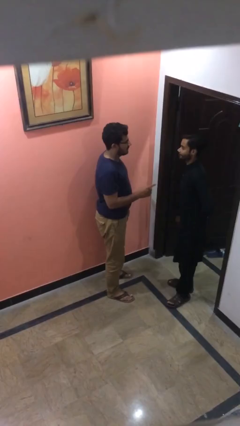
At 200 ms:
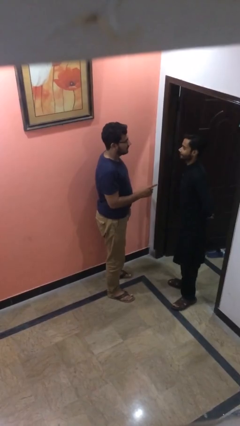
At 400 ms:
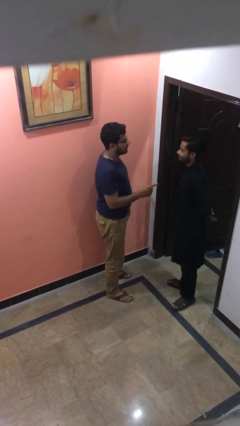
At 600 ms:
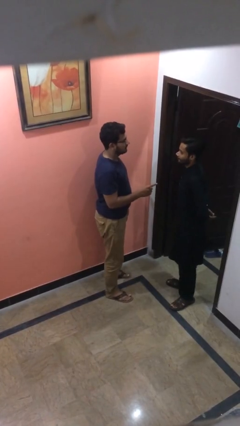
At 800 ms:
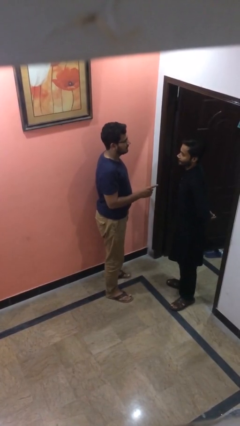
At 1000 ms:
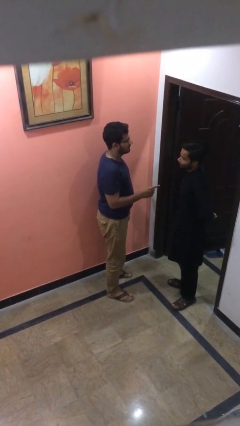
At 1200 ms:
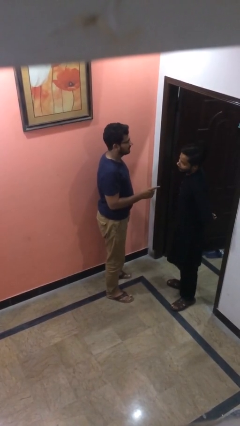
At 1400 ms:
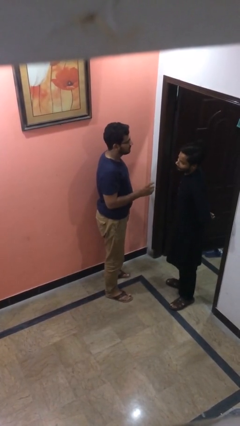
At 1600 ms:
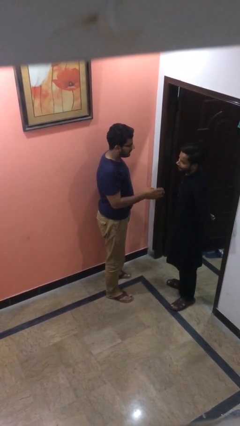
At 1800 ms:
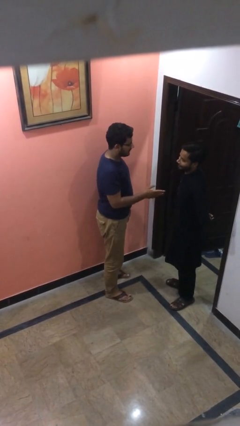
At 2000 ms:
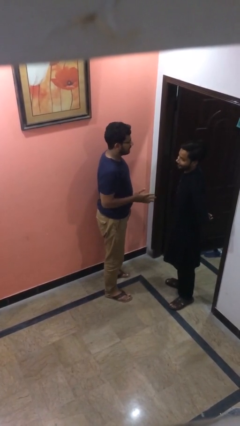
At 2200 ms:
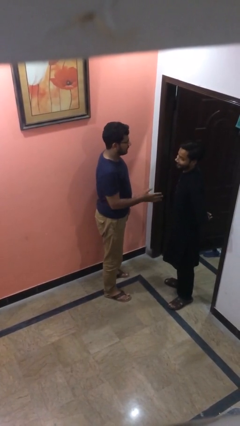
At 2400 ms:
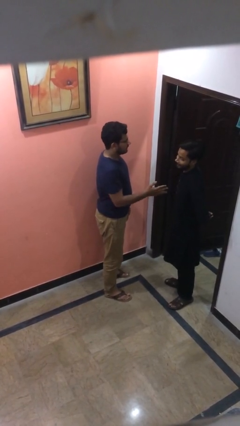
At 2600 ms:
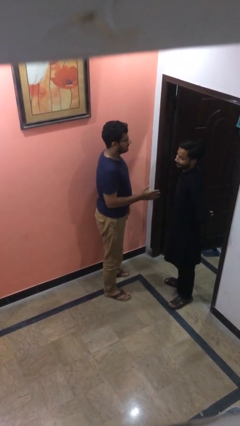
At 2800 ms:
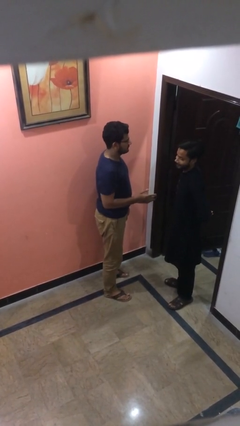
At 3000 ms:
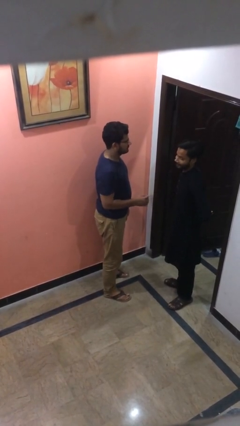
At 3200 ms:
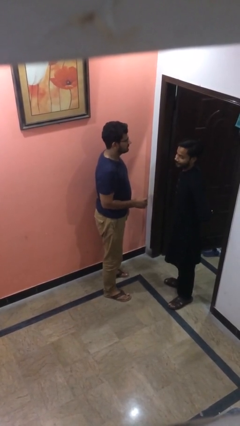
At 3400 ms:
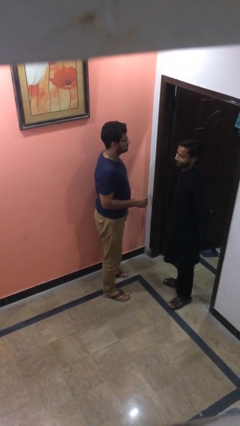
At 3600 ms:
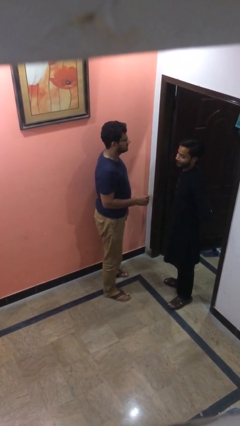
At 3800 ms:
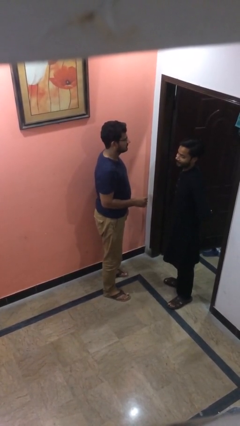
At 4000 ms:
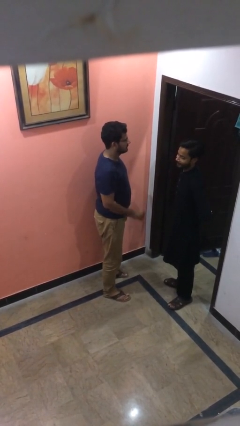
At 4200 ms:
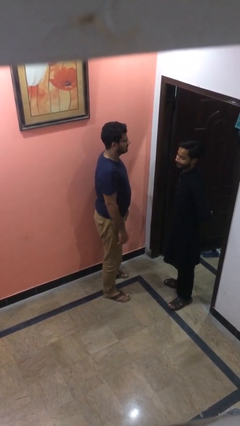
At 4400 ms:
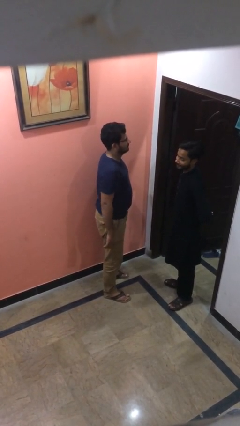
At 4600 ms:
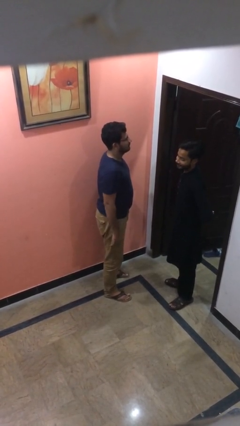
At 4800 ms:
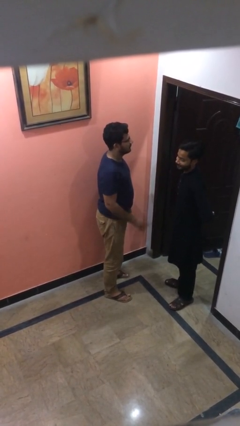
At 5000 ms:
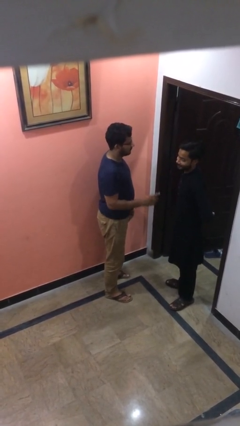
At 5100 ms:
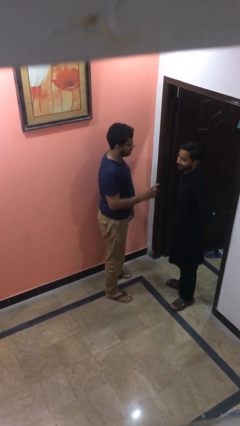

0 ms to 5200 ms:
person talks to person

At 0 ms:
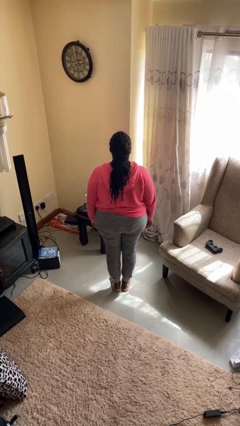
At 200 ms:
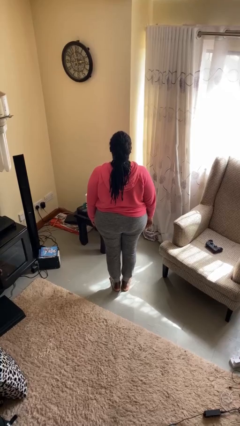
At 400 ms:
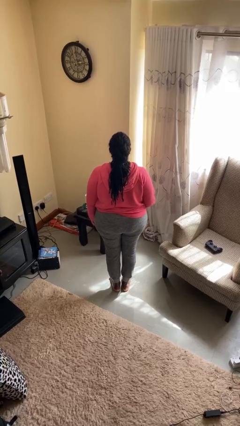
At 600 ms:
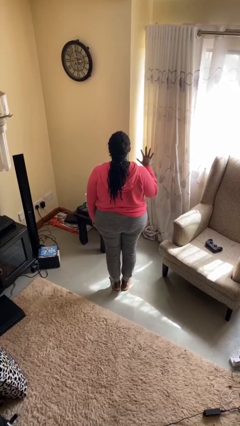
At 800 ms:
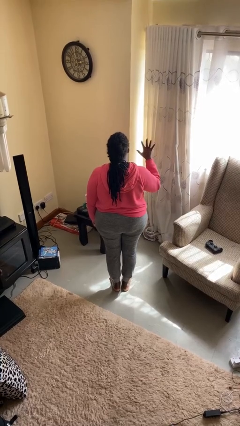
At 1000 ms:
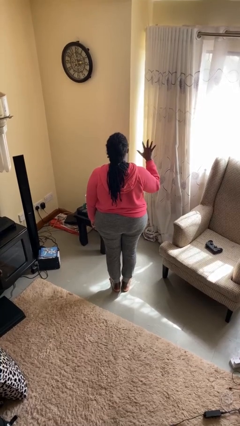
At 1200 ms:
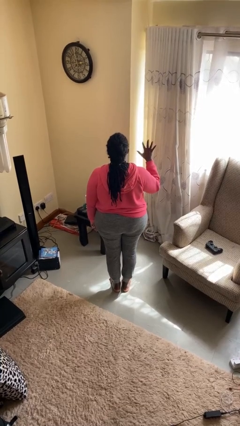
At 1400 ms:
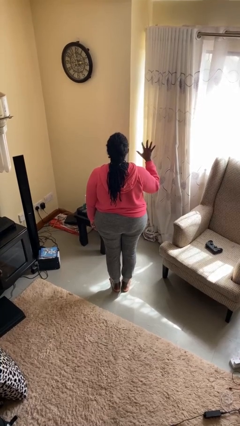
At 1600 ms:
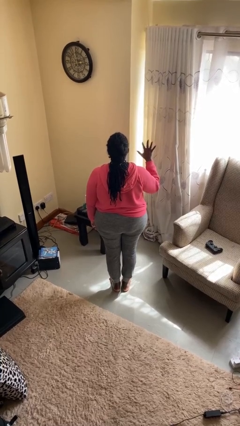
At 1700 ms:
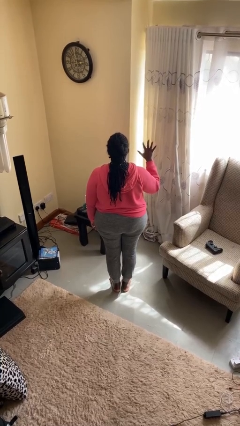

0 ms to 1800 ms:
person gestures number five

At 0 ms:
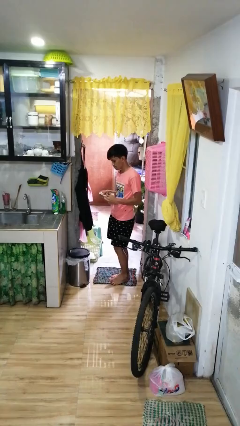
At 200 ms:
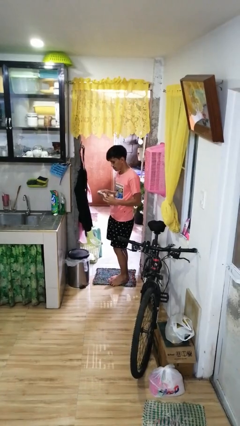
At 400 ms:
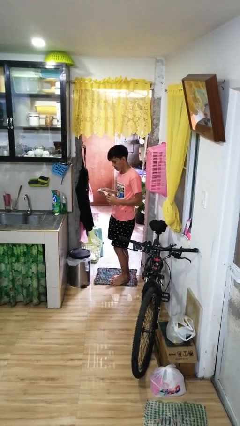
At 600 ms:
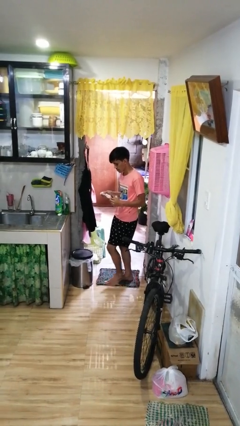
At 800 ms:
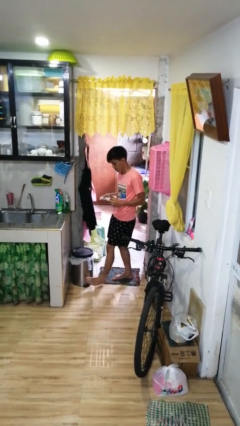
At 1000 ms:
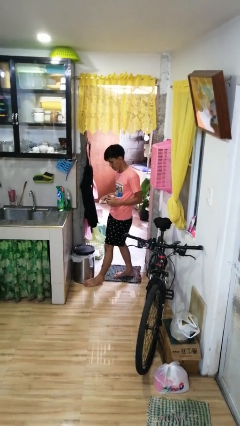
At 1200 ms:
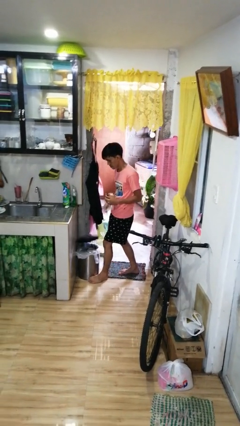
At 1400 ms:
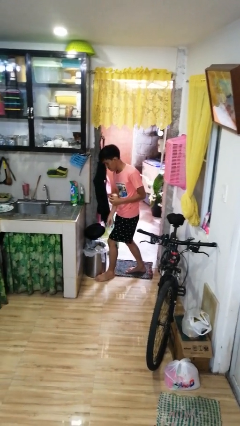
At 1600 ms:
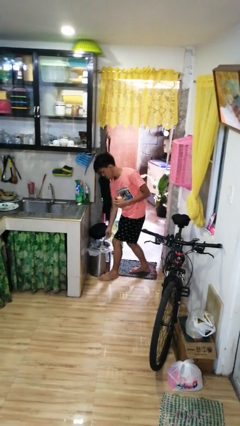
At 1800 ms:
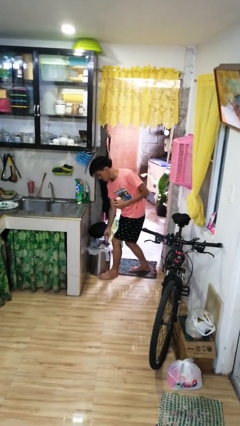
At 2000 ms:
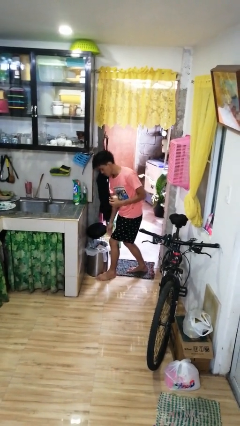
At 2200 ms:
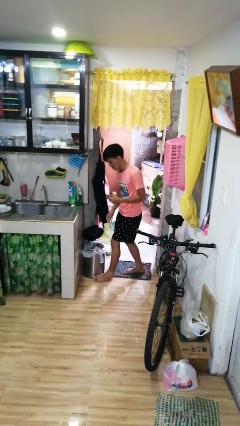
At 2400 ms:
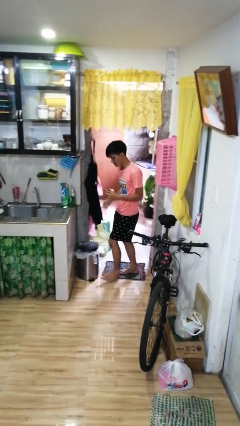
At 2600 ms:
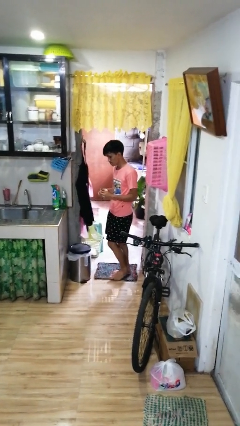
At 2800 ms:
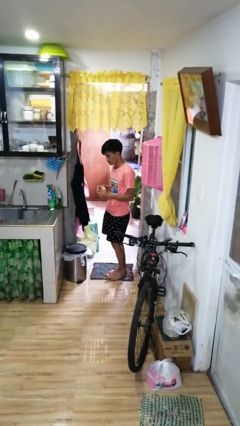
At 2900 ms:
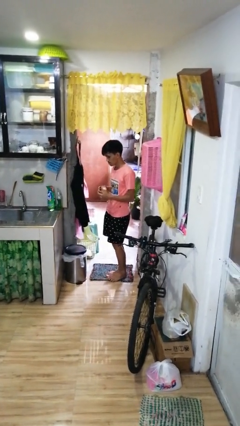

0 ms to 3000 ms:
person discards trash

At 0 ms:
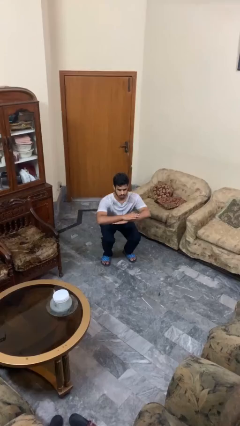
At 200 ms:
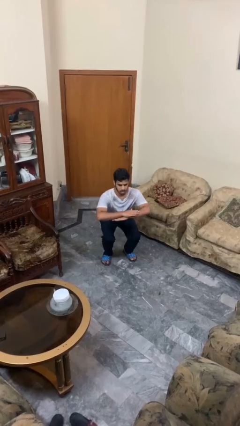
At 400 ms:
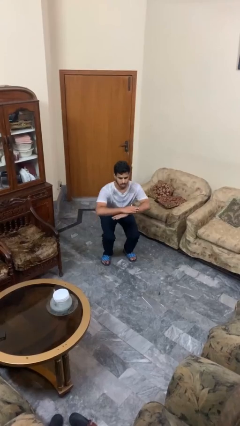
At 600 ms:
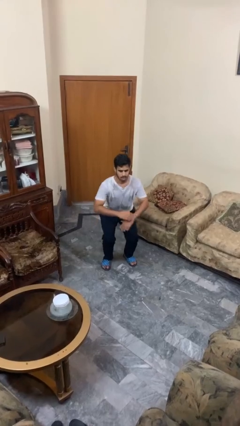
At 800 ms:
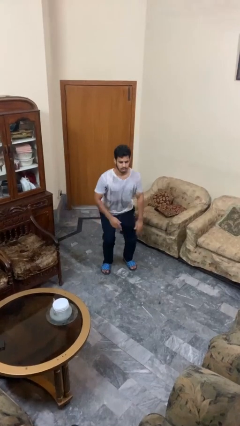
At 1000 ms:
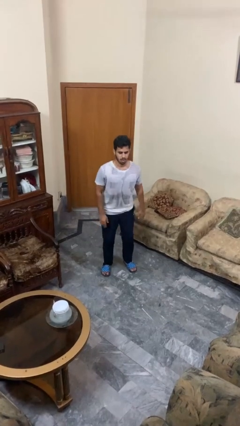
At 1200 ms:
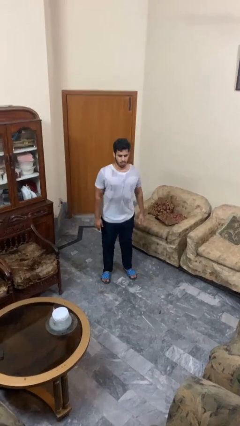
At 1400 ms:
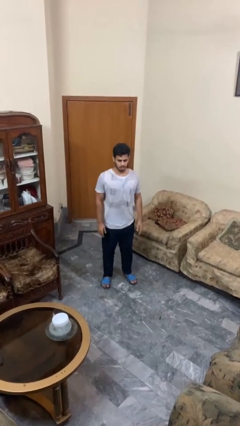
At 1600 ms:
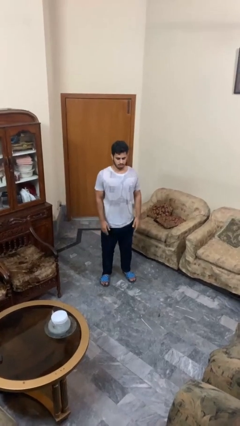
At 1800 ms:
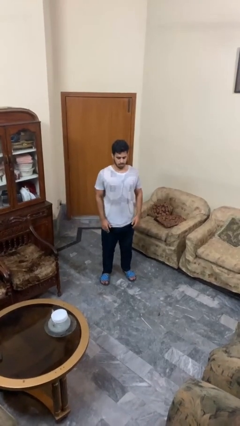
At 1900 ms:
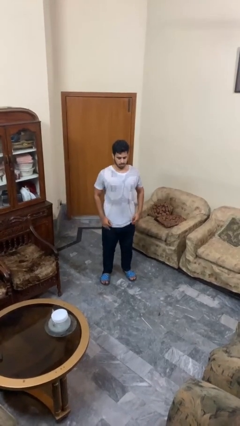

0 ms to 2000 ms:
person stands up

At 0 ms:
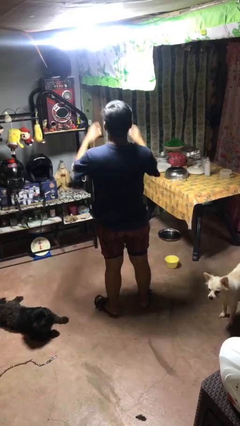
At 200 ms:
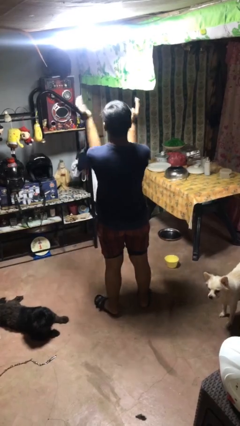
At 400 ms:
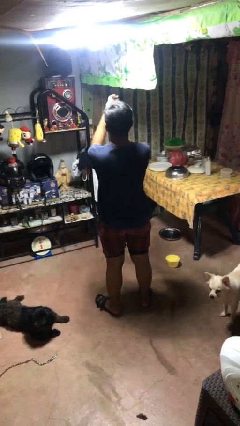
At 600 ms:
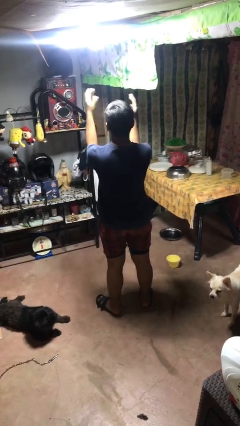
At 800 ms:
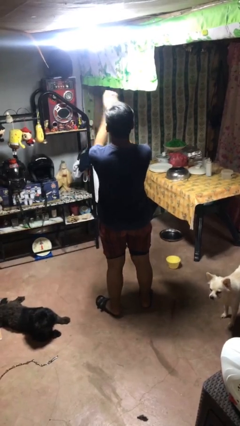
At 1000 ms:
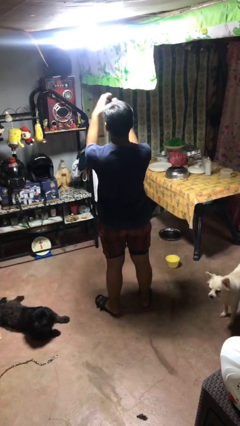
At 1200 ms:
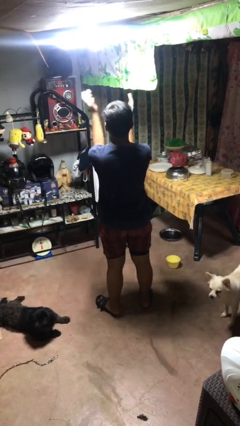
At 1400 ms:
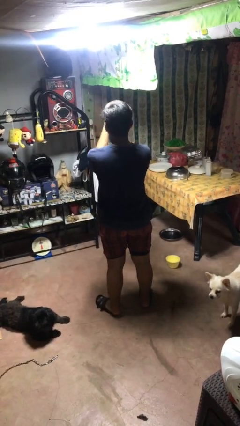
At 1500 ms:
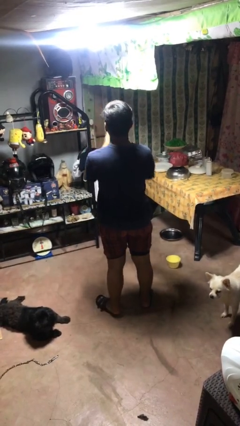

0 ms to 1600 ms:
person claps hands

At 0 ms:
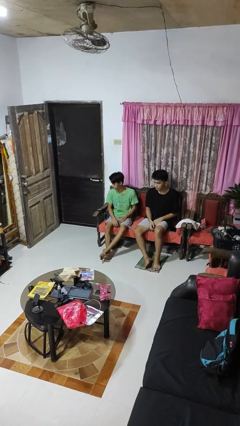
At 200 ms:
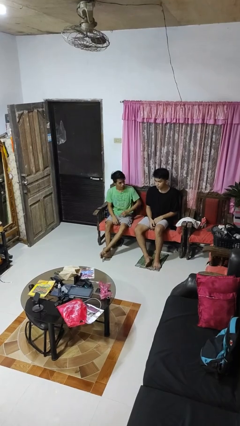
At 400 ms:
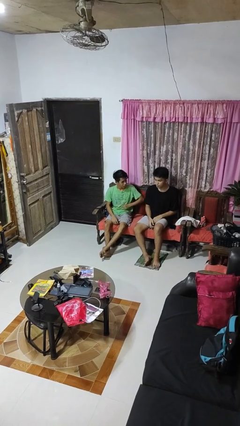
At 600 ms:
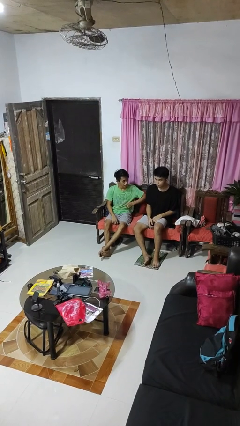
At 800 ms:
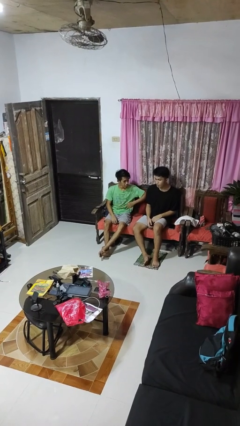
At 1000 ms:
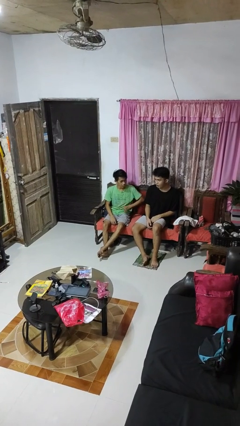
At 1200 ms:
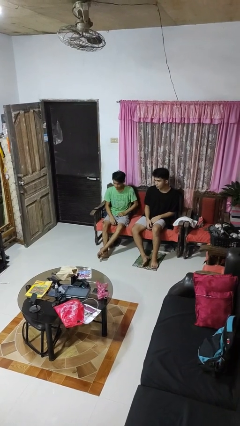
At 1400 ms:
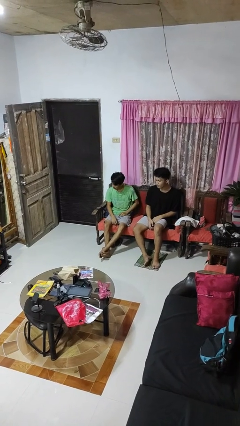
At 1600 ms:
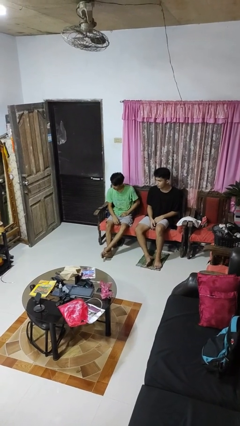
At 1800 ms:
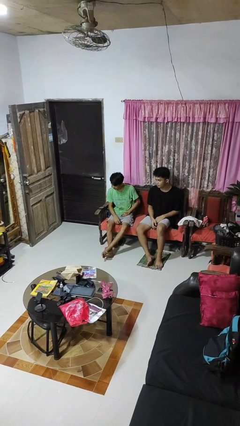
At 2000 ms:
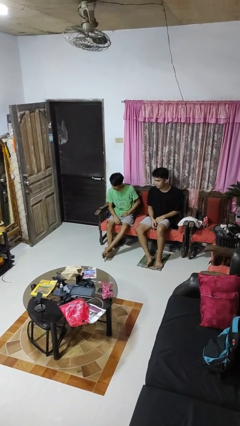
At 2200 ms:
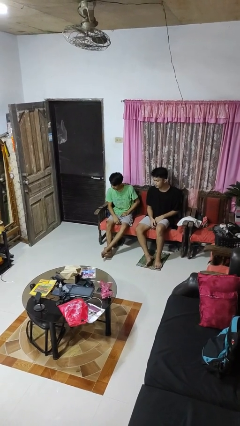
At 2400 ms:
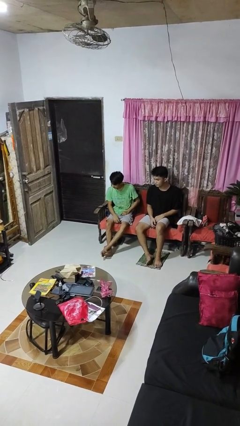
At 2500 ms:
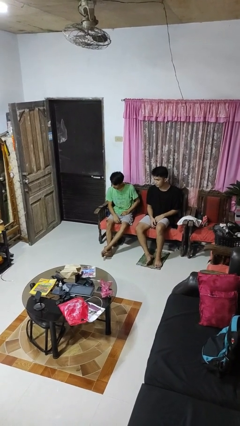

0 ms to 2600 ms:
person nudges person with elbow

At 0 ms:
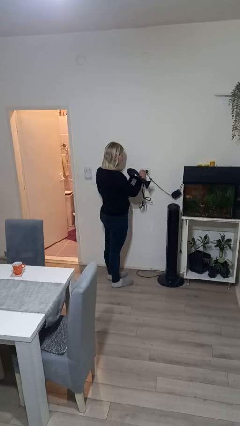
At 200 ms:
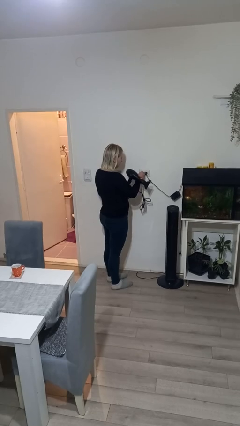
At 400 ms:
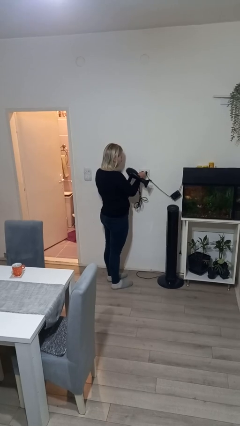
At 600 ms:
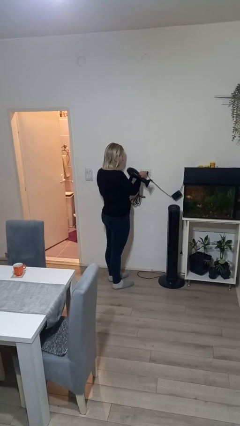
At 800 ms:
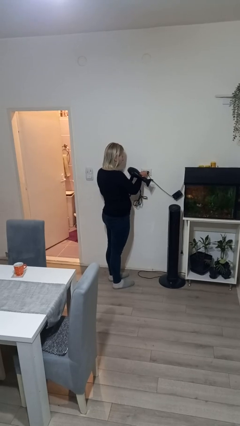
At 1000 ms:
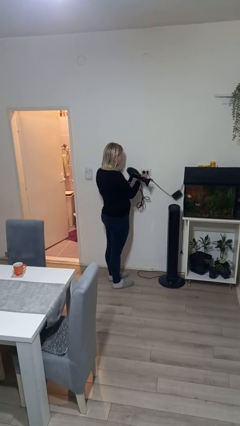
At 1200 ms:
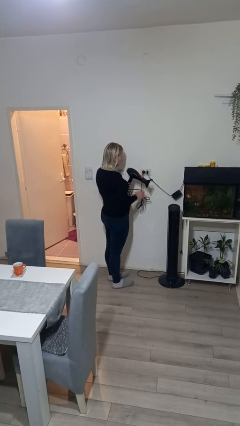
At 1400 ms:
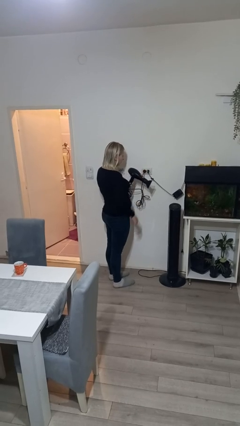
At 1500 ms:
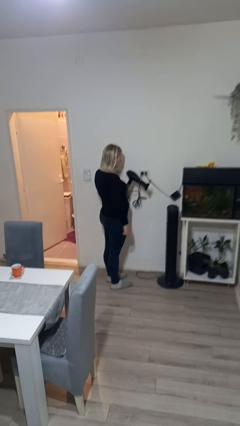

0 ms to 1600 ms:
person plugs into electrical socket
